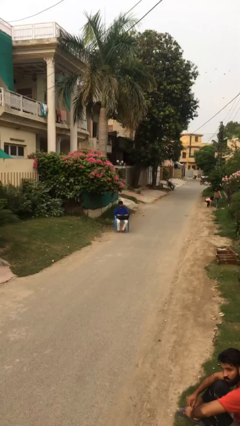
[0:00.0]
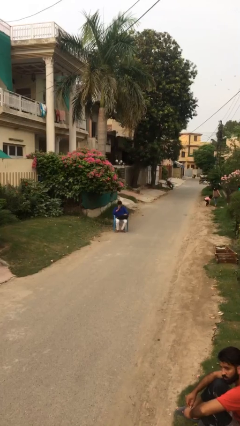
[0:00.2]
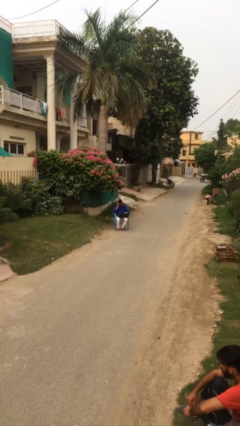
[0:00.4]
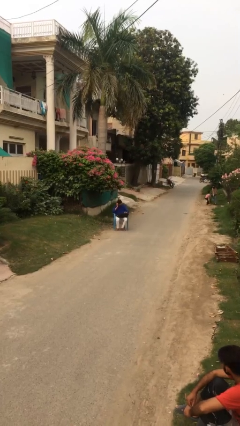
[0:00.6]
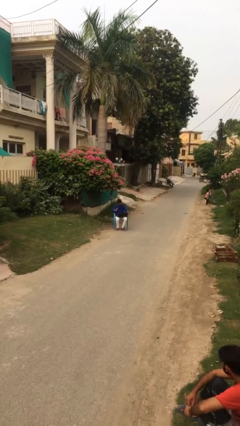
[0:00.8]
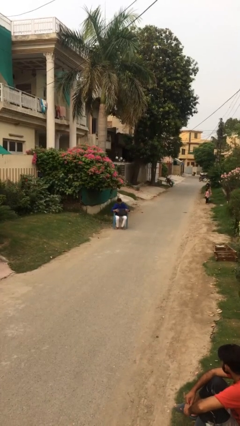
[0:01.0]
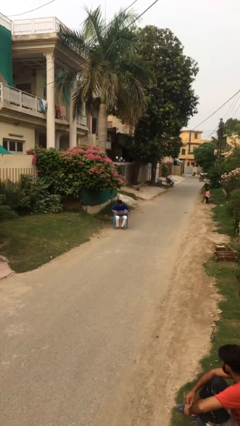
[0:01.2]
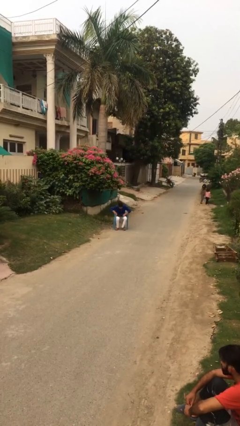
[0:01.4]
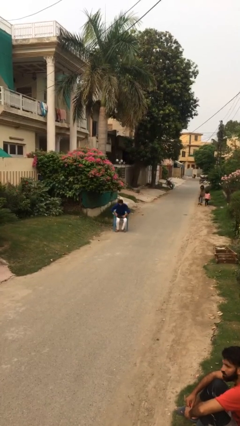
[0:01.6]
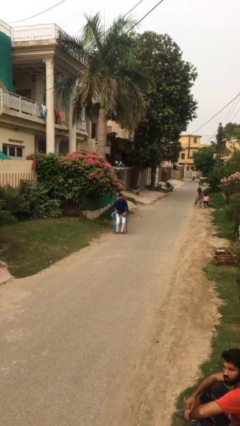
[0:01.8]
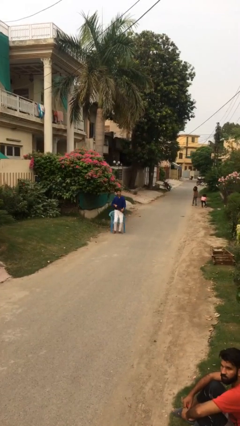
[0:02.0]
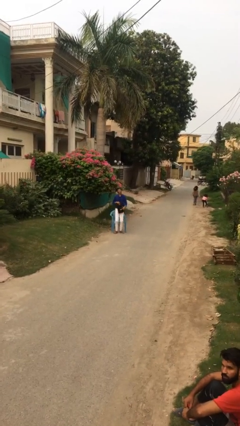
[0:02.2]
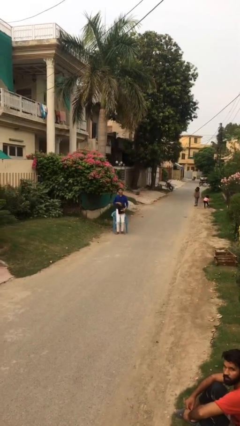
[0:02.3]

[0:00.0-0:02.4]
person stands up

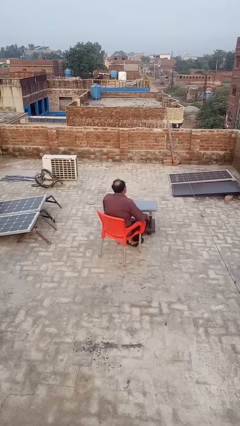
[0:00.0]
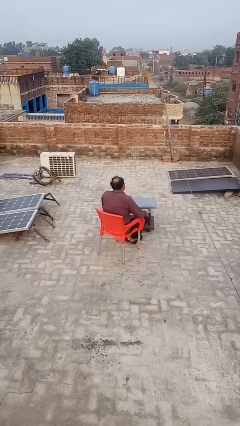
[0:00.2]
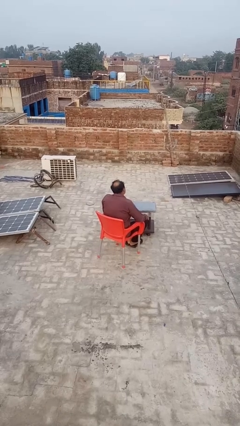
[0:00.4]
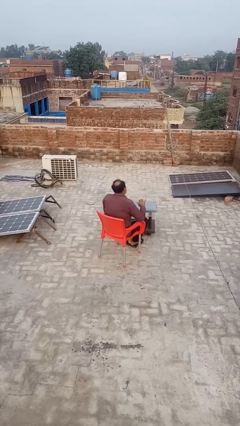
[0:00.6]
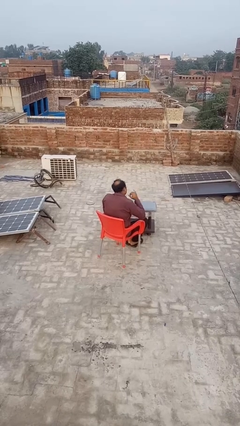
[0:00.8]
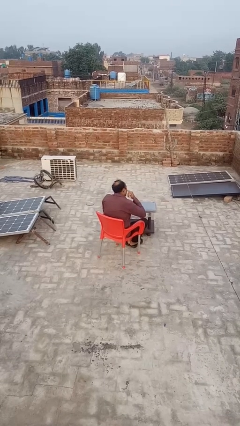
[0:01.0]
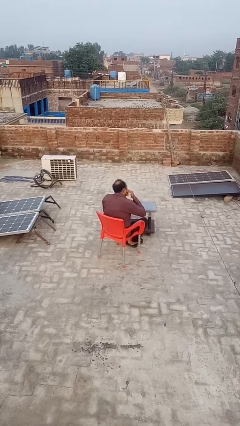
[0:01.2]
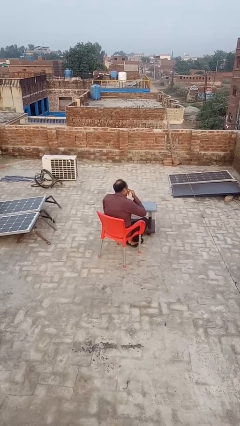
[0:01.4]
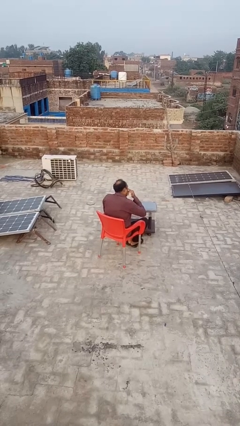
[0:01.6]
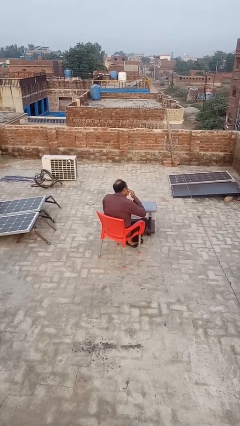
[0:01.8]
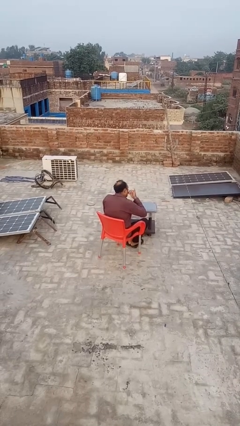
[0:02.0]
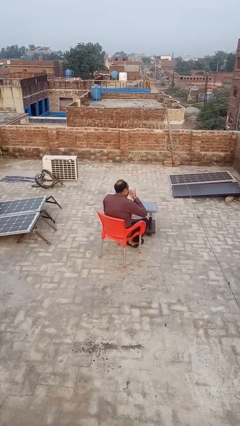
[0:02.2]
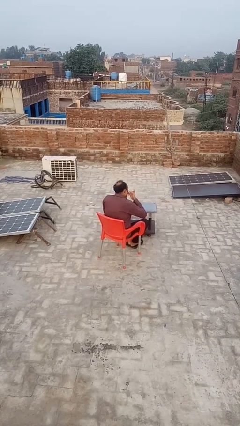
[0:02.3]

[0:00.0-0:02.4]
person licks fingers

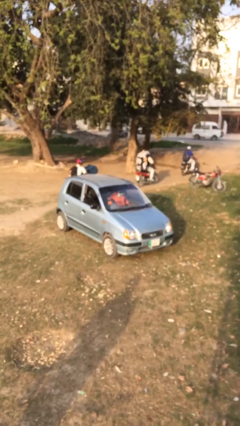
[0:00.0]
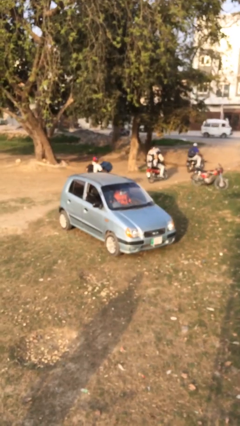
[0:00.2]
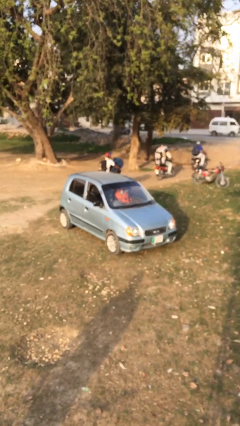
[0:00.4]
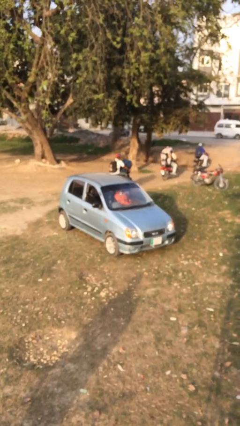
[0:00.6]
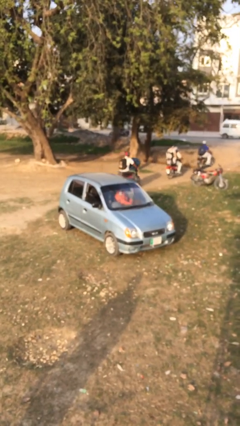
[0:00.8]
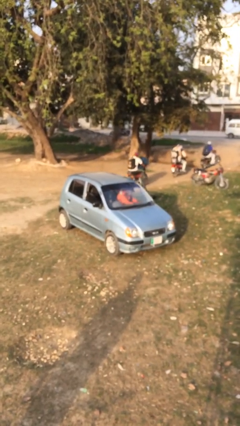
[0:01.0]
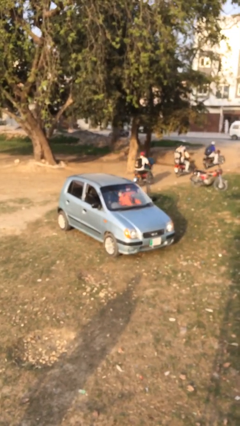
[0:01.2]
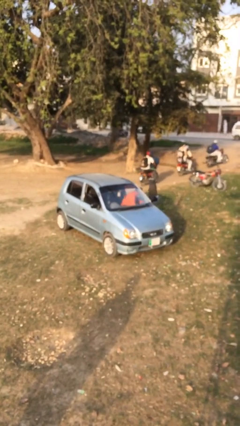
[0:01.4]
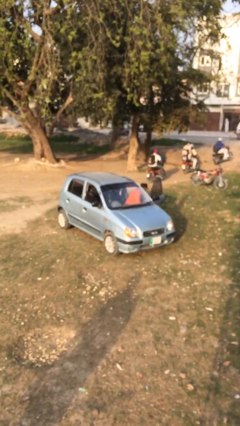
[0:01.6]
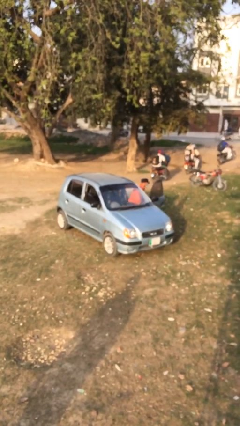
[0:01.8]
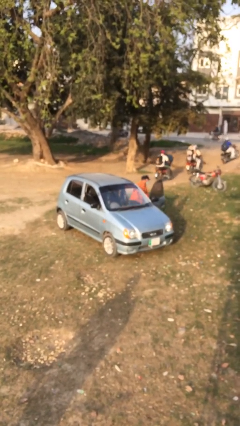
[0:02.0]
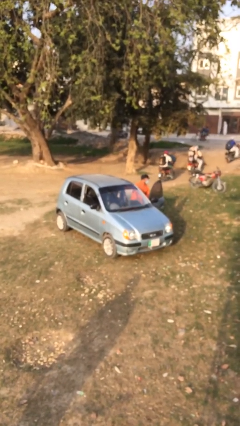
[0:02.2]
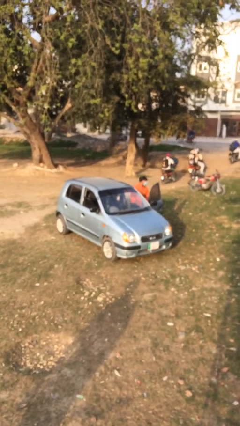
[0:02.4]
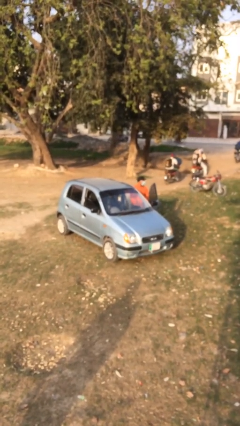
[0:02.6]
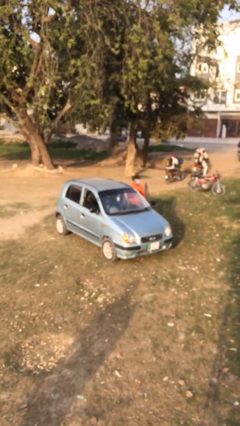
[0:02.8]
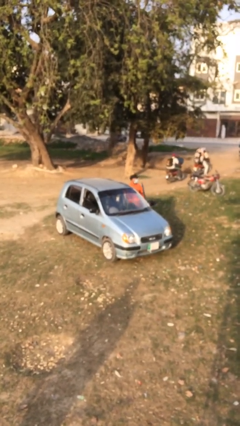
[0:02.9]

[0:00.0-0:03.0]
car drops off person

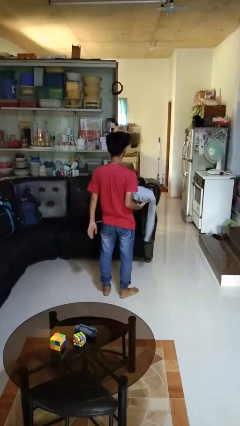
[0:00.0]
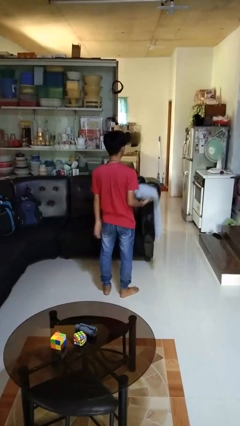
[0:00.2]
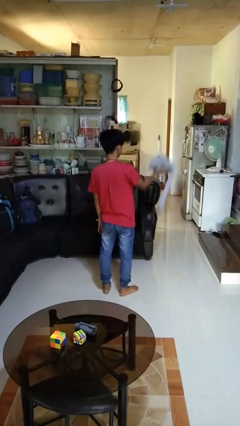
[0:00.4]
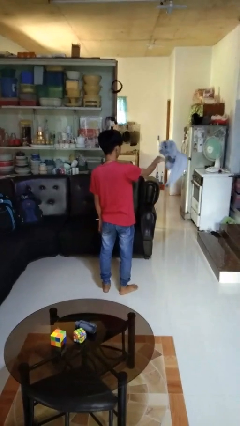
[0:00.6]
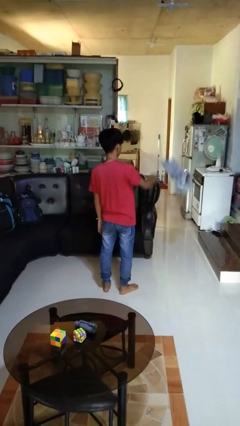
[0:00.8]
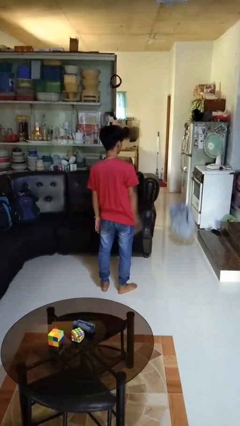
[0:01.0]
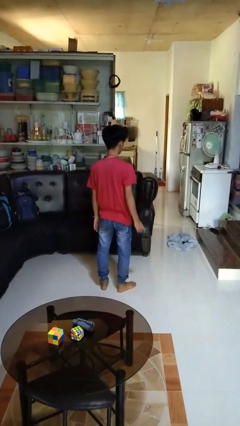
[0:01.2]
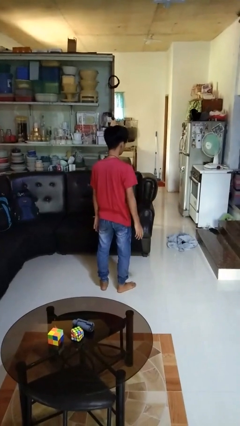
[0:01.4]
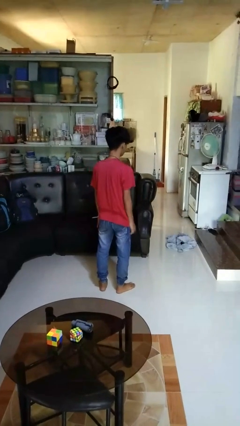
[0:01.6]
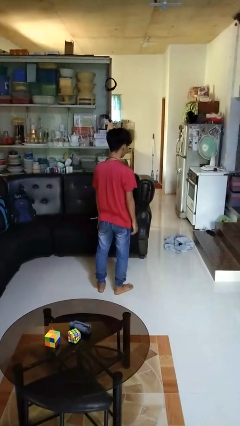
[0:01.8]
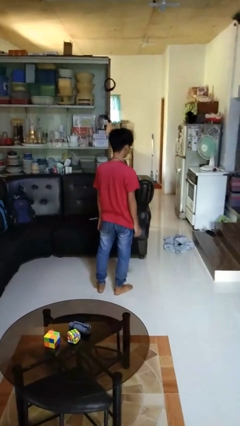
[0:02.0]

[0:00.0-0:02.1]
person throws object into air

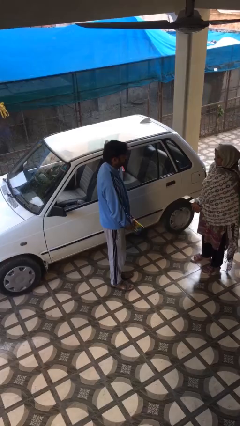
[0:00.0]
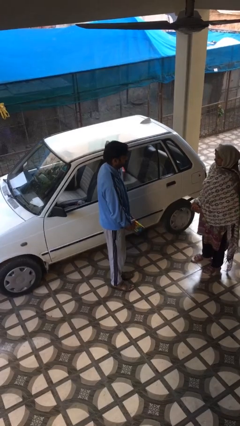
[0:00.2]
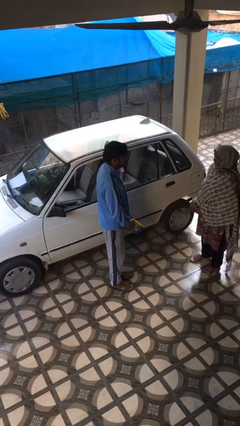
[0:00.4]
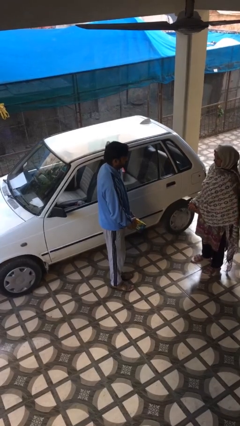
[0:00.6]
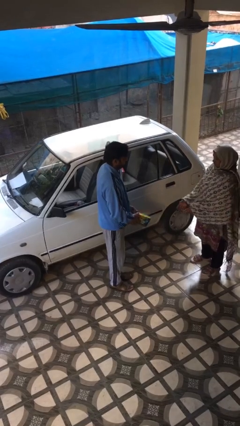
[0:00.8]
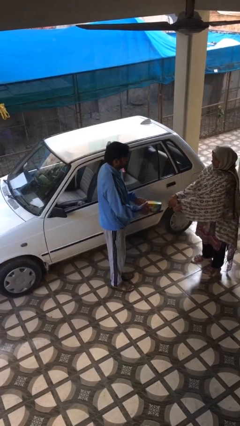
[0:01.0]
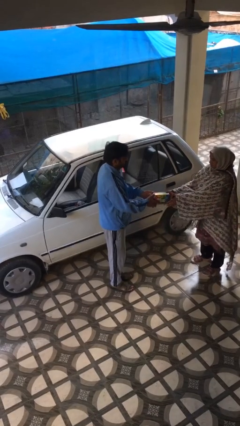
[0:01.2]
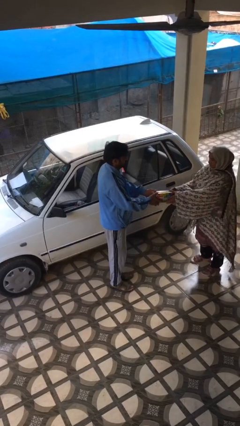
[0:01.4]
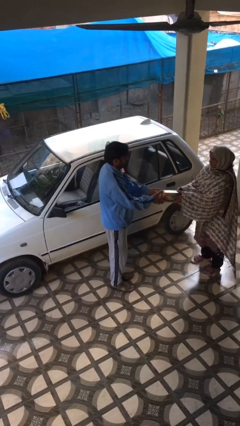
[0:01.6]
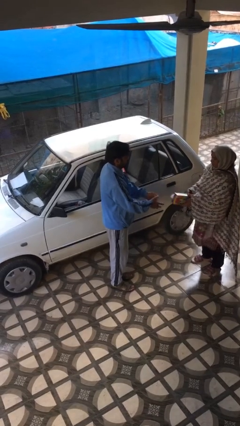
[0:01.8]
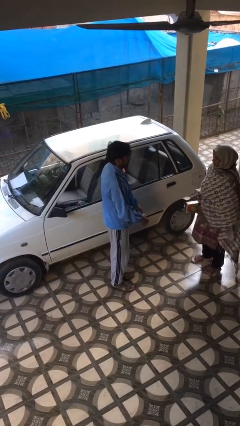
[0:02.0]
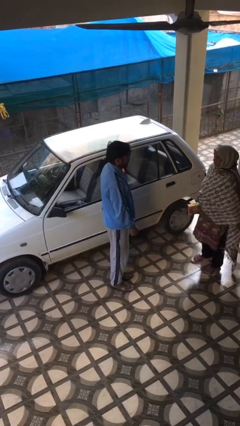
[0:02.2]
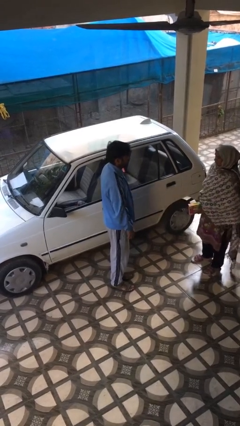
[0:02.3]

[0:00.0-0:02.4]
person transfers object to person

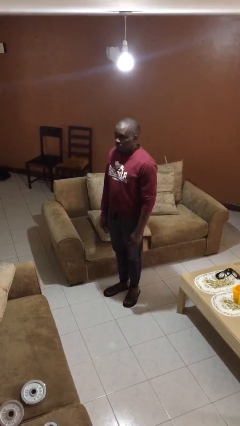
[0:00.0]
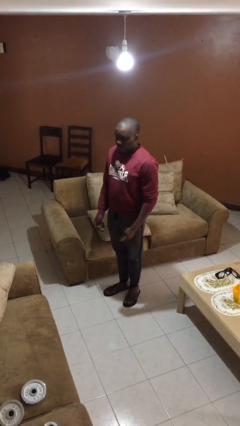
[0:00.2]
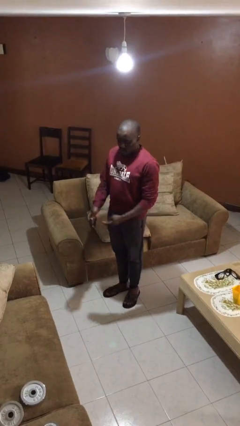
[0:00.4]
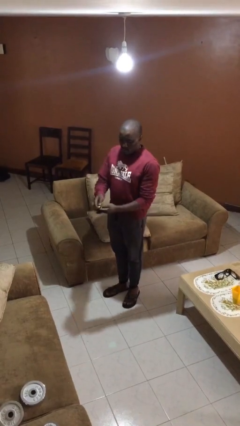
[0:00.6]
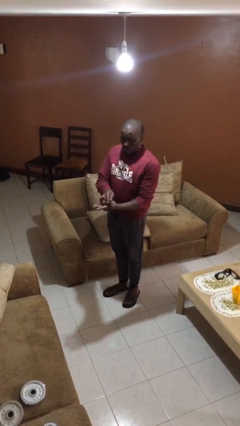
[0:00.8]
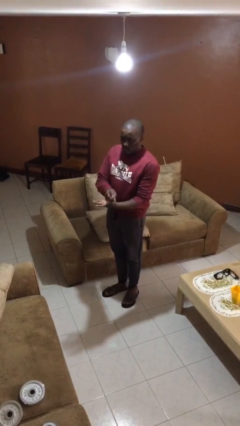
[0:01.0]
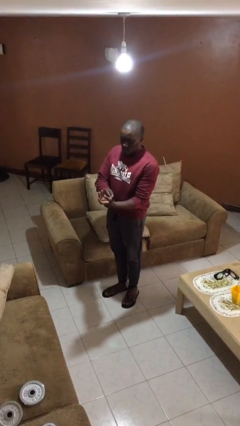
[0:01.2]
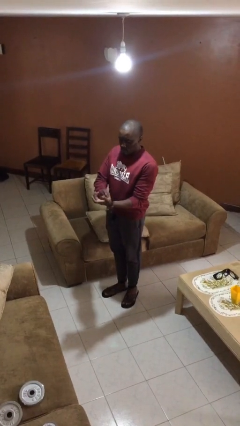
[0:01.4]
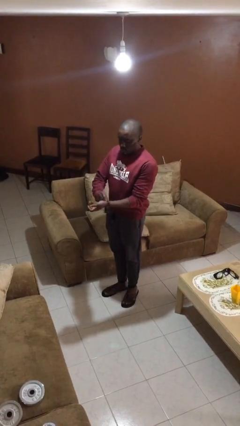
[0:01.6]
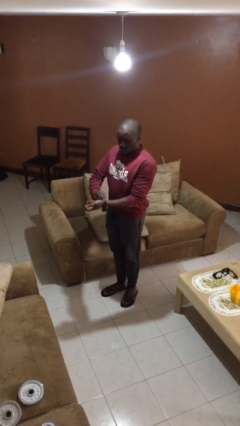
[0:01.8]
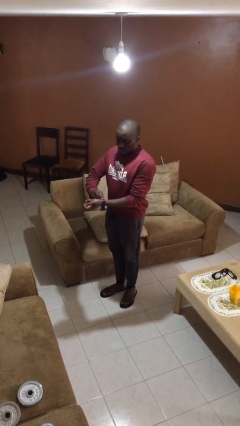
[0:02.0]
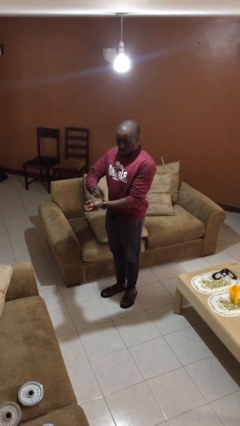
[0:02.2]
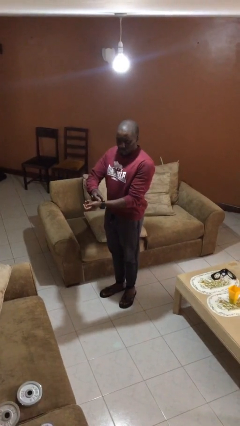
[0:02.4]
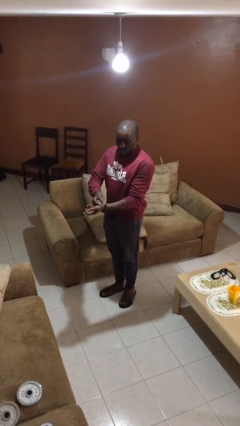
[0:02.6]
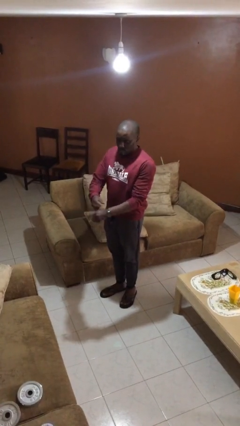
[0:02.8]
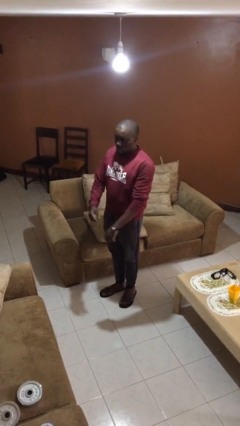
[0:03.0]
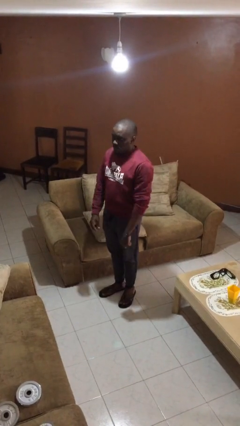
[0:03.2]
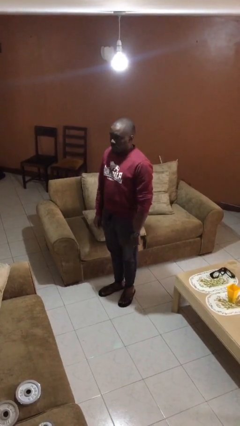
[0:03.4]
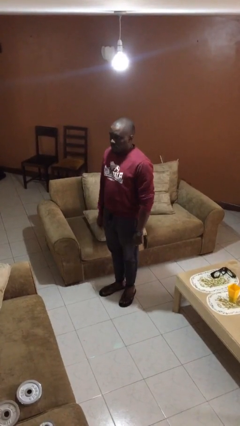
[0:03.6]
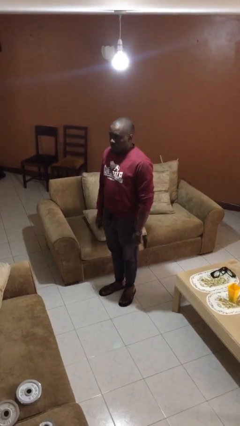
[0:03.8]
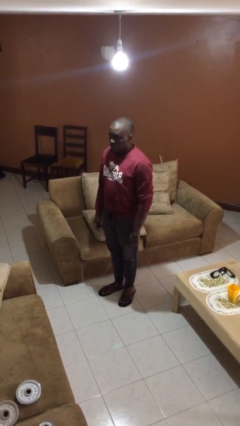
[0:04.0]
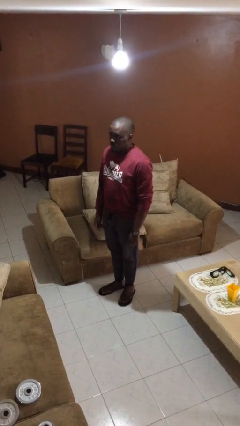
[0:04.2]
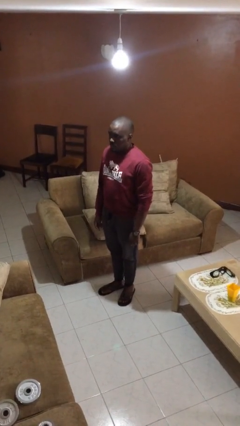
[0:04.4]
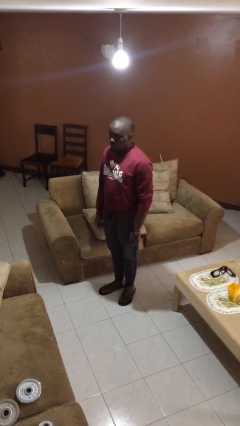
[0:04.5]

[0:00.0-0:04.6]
person puts on wristwatch

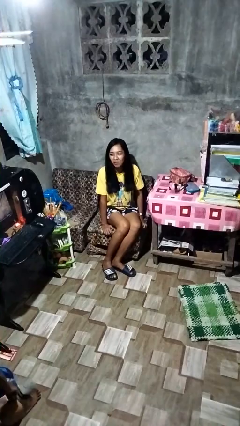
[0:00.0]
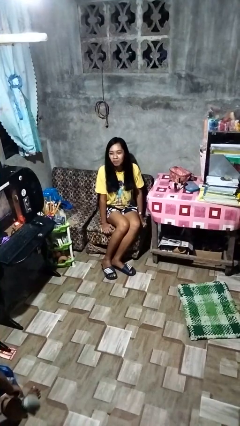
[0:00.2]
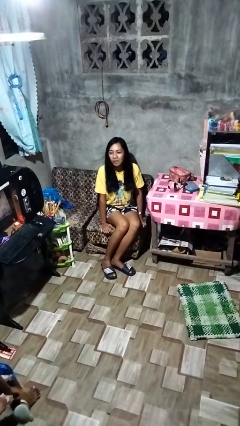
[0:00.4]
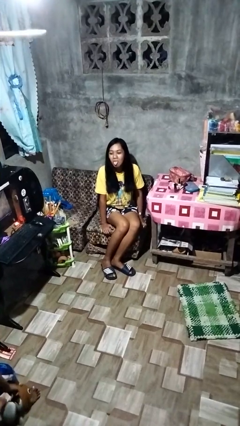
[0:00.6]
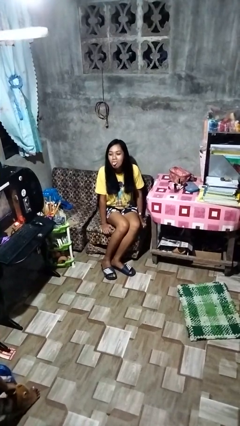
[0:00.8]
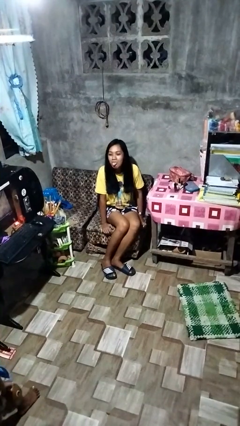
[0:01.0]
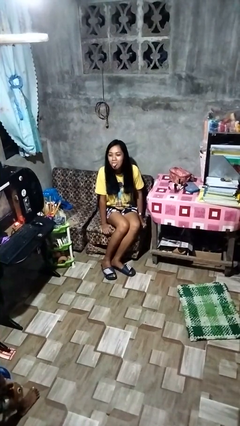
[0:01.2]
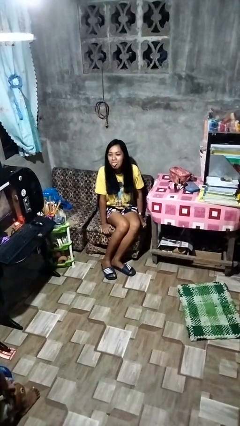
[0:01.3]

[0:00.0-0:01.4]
person sticks out tongue
